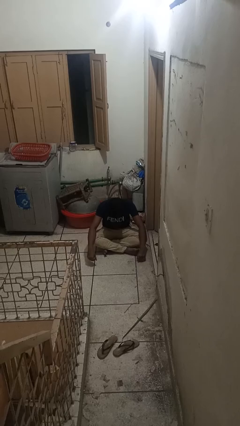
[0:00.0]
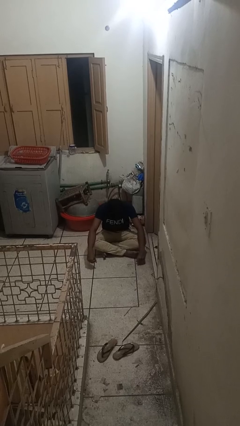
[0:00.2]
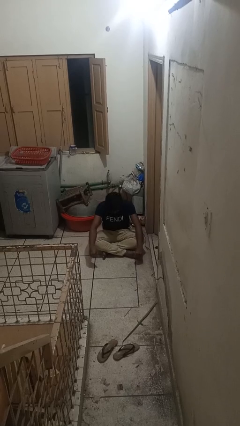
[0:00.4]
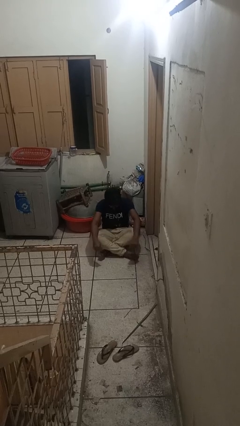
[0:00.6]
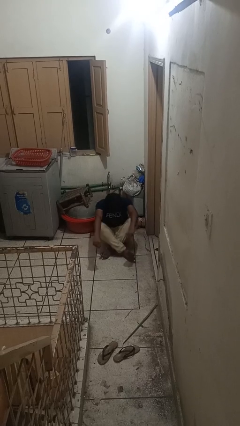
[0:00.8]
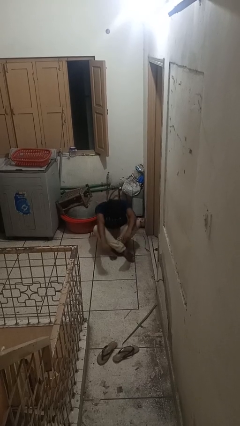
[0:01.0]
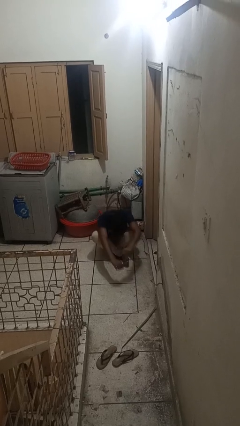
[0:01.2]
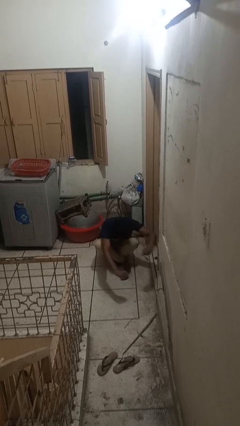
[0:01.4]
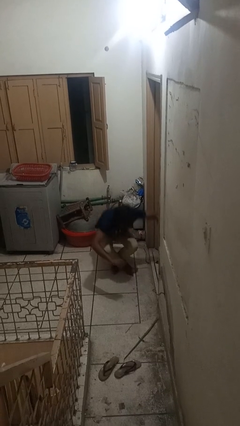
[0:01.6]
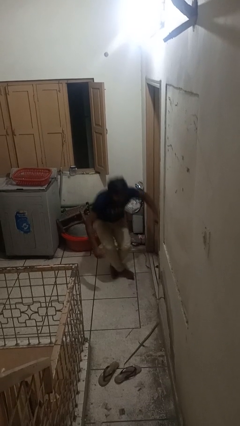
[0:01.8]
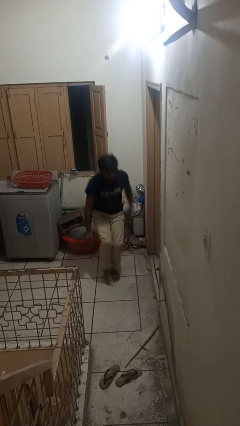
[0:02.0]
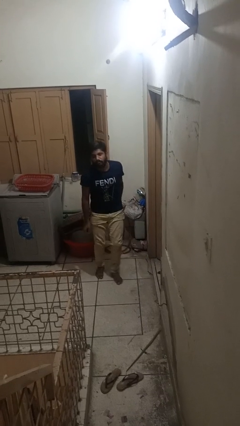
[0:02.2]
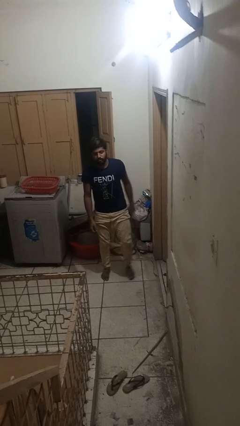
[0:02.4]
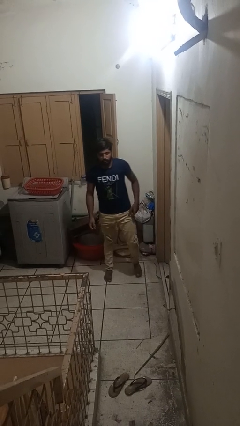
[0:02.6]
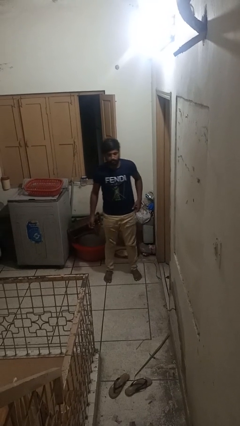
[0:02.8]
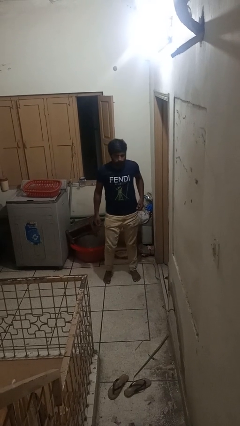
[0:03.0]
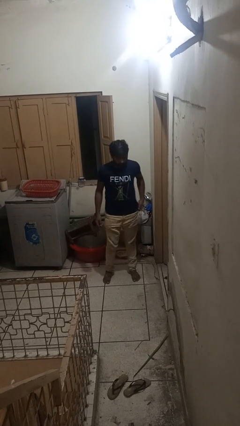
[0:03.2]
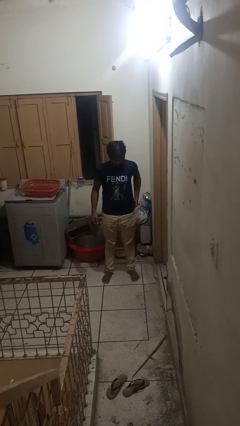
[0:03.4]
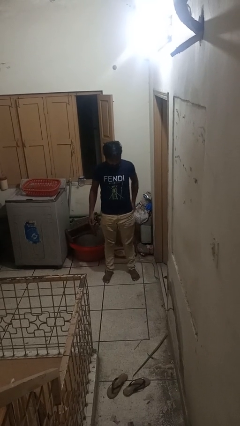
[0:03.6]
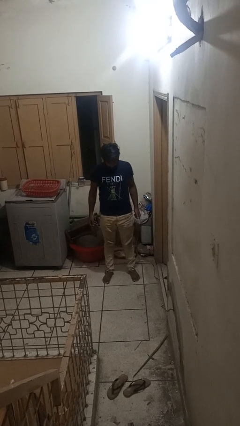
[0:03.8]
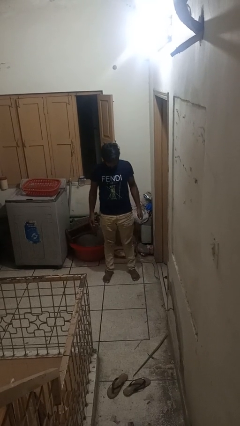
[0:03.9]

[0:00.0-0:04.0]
person stands up from floor

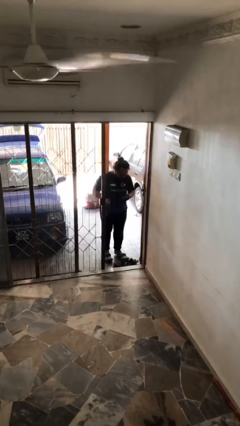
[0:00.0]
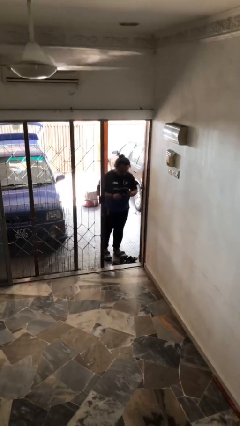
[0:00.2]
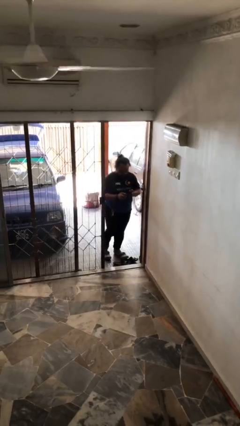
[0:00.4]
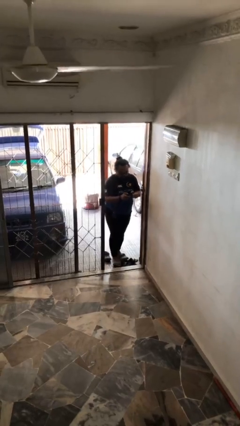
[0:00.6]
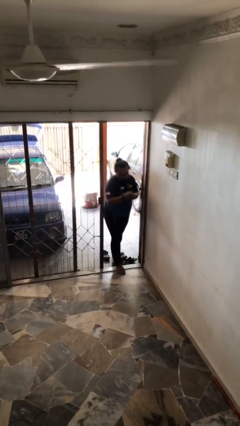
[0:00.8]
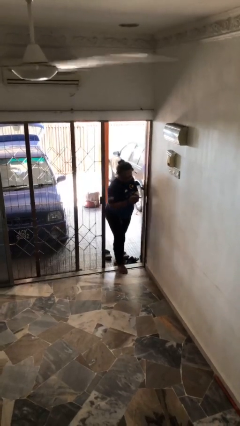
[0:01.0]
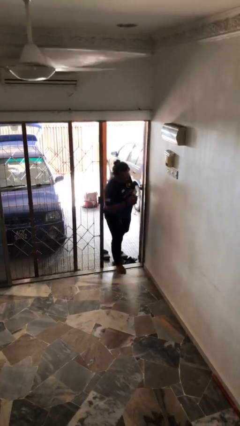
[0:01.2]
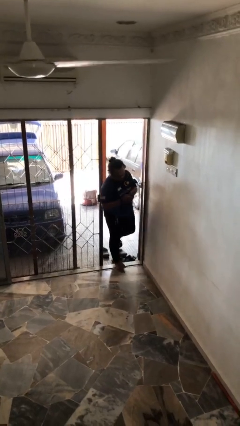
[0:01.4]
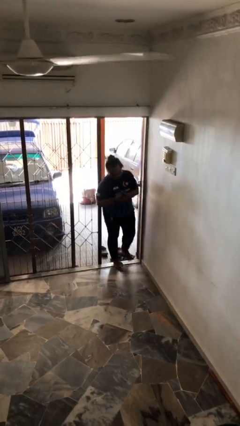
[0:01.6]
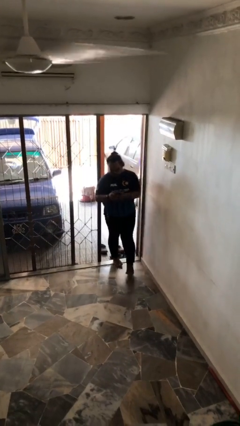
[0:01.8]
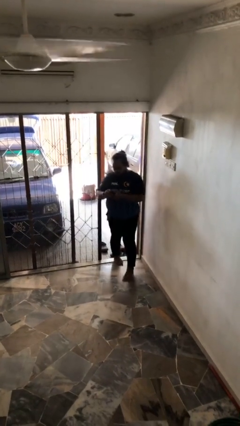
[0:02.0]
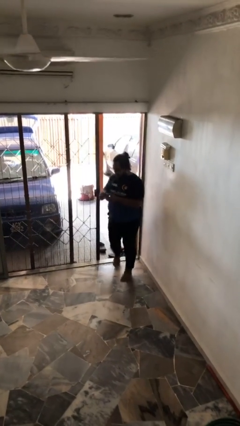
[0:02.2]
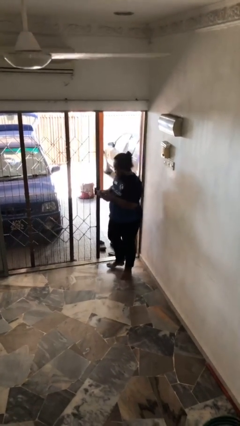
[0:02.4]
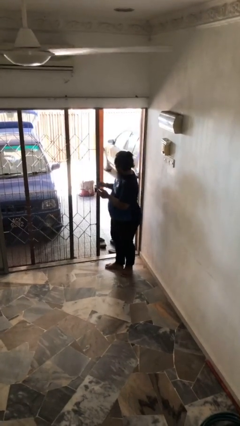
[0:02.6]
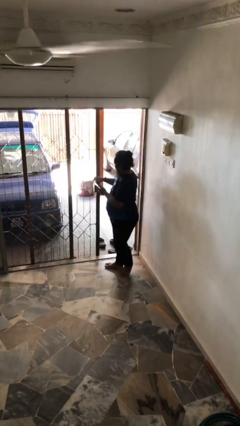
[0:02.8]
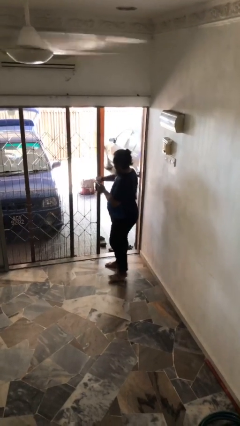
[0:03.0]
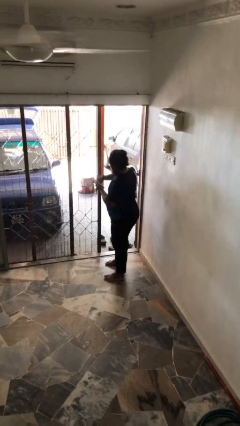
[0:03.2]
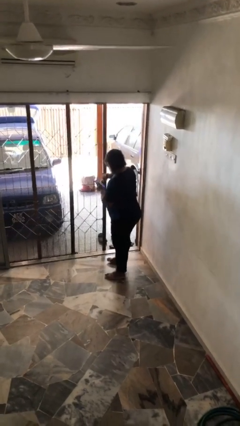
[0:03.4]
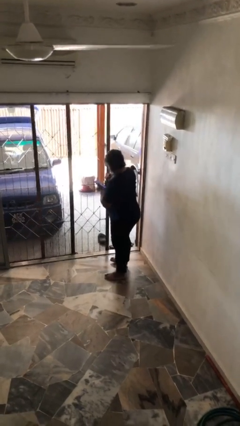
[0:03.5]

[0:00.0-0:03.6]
person enters scene through structure

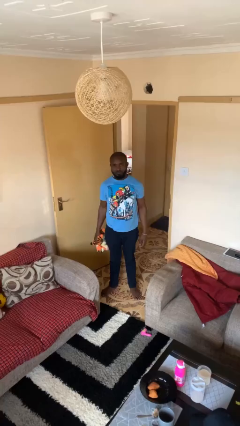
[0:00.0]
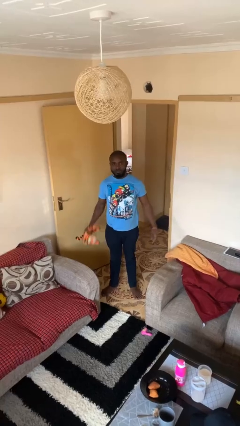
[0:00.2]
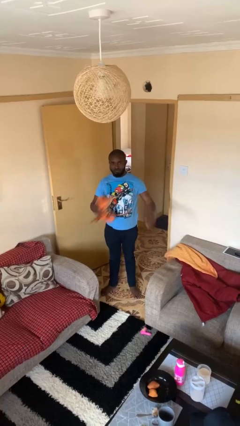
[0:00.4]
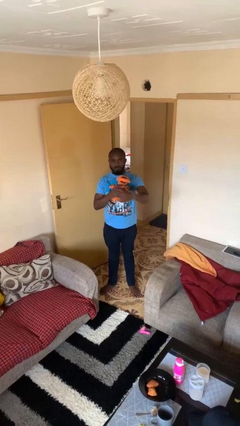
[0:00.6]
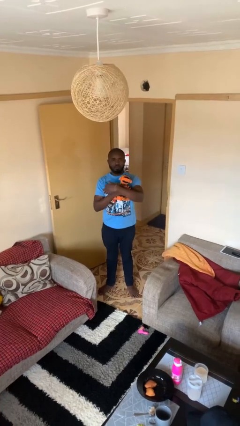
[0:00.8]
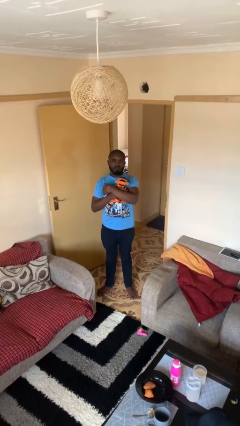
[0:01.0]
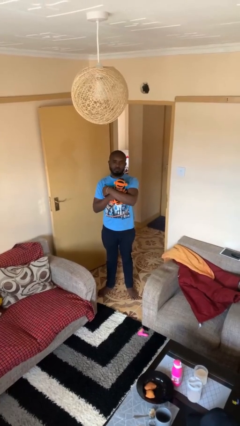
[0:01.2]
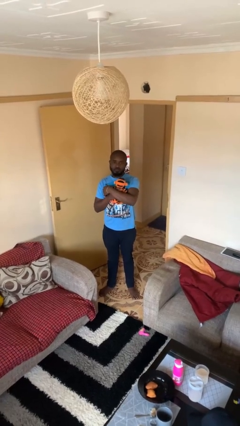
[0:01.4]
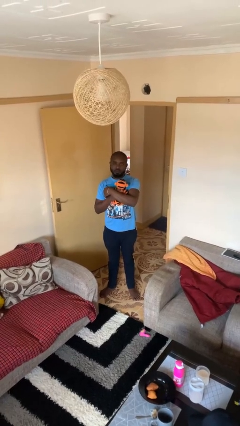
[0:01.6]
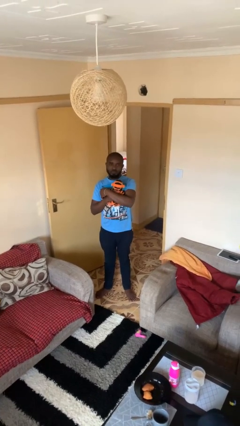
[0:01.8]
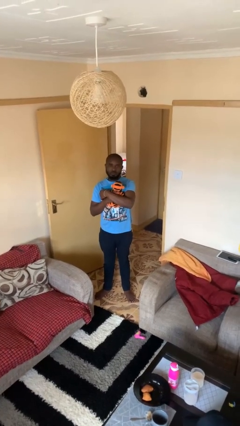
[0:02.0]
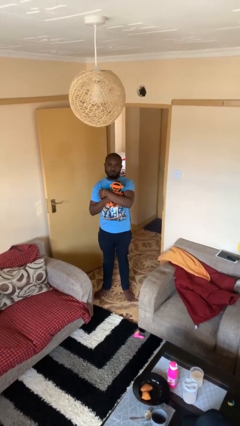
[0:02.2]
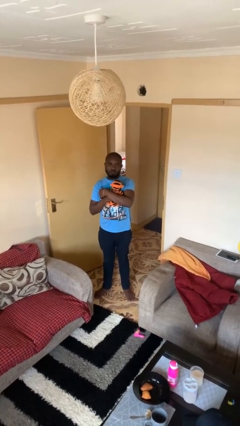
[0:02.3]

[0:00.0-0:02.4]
person hugs stuffed animal

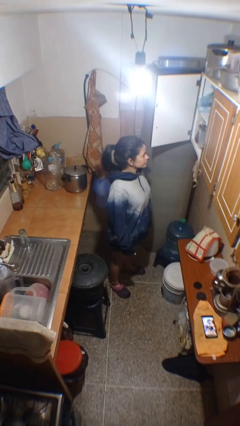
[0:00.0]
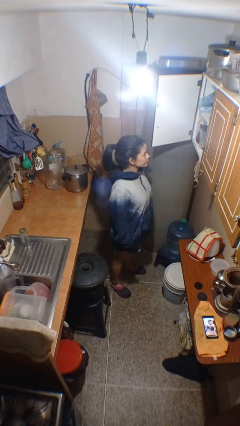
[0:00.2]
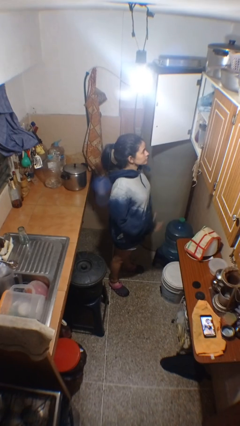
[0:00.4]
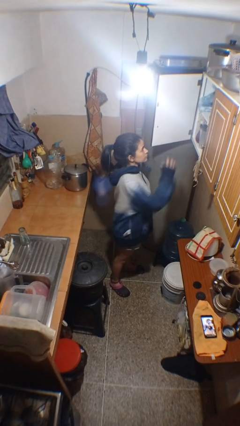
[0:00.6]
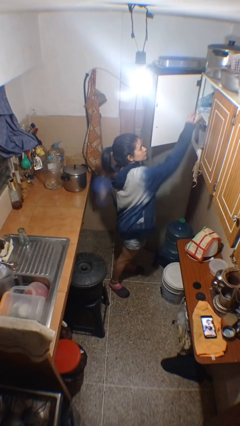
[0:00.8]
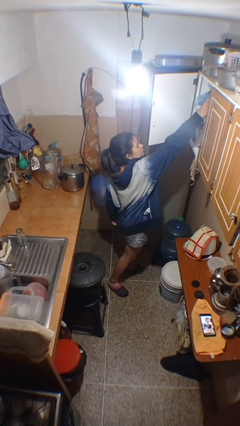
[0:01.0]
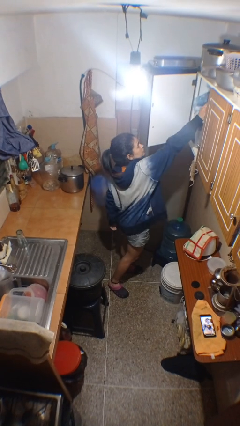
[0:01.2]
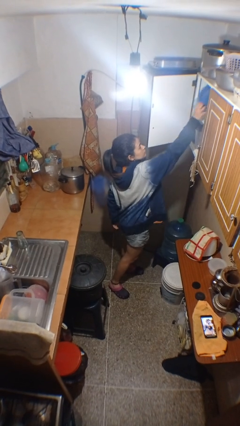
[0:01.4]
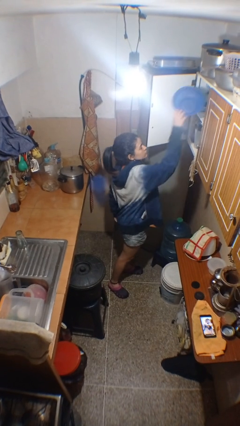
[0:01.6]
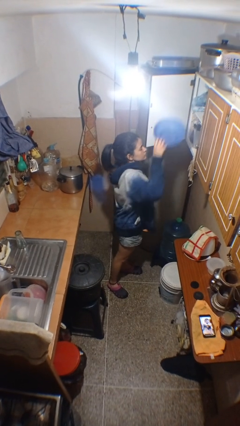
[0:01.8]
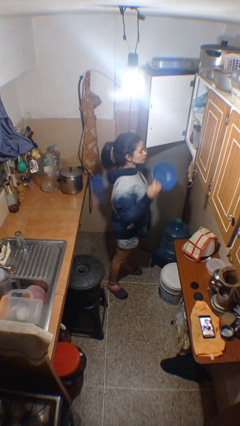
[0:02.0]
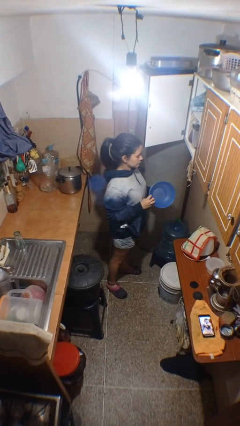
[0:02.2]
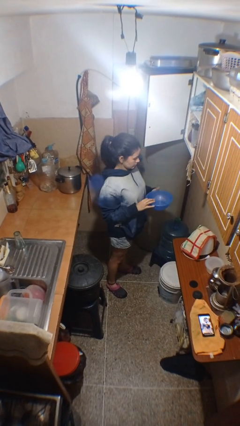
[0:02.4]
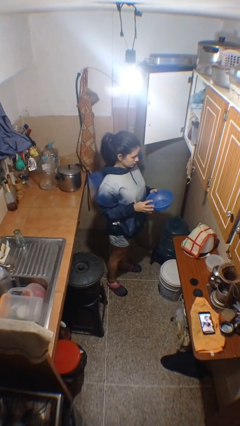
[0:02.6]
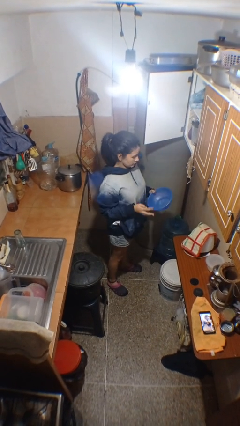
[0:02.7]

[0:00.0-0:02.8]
person picks up object from cabinet

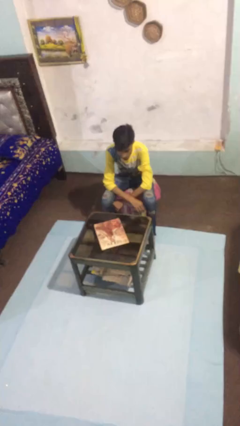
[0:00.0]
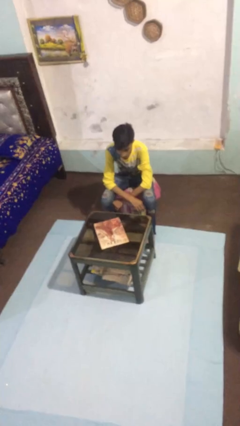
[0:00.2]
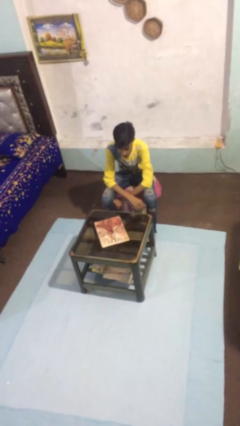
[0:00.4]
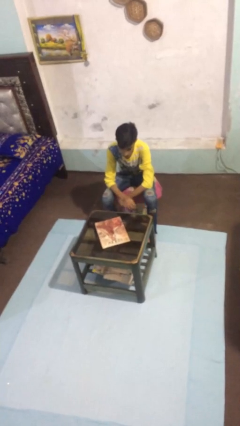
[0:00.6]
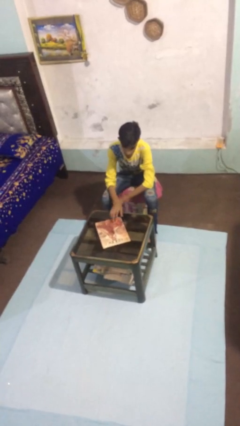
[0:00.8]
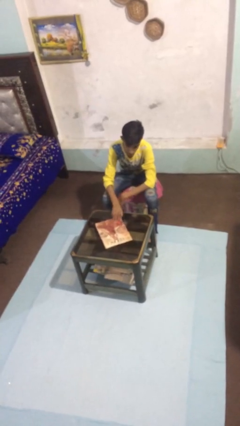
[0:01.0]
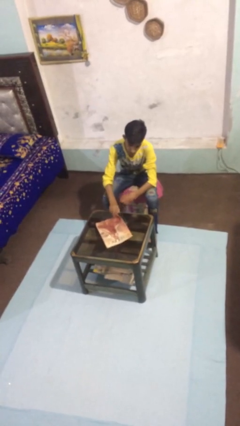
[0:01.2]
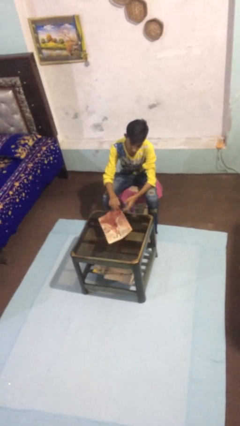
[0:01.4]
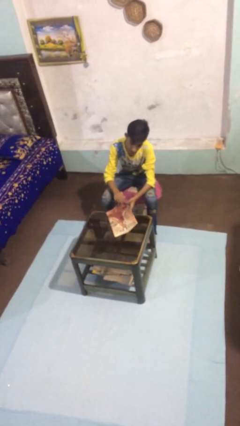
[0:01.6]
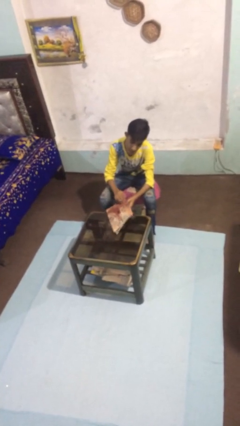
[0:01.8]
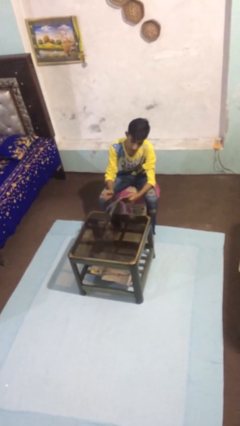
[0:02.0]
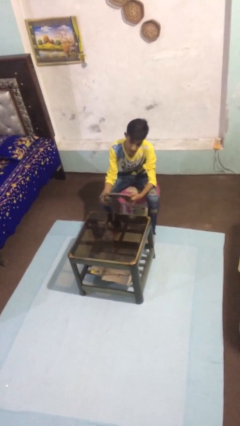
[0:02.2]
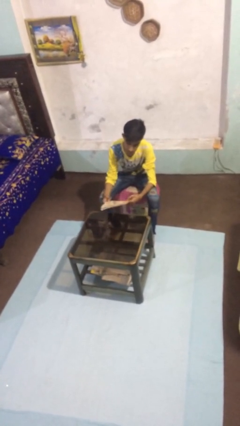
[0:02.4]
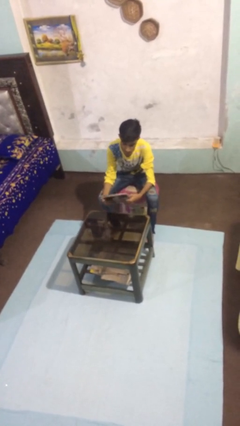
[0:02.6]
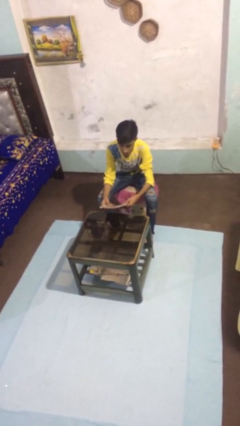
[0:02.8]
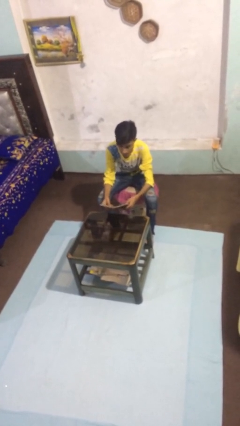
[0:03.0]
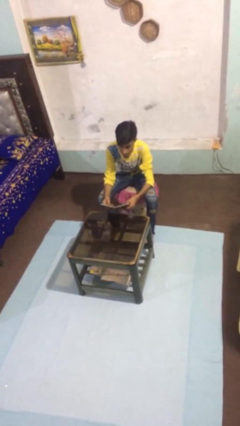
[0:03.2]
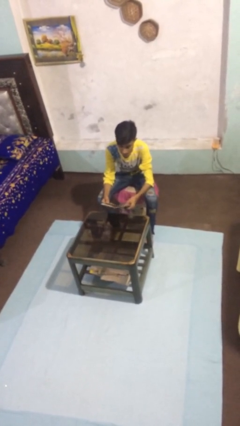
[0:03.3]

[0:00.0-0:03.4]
person picks up object from table

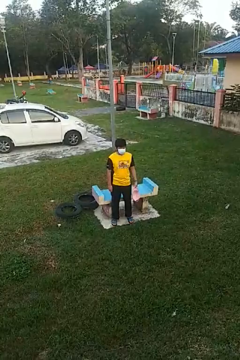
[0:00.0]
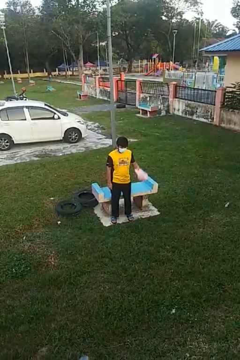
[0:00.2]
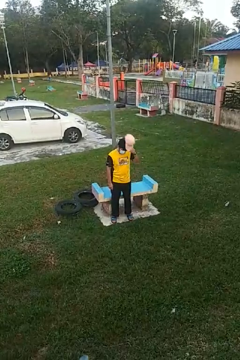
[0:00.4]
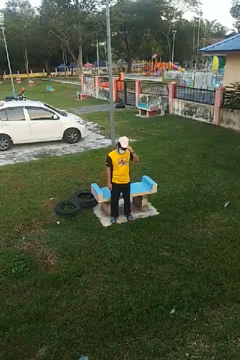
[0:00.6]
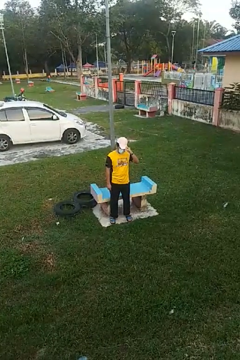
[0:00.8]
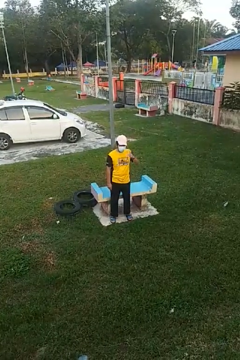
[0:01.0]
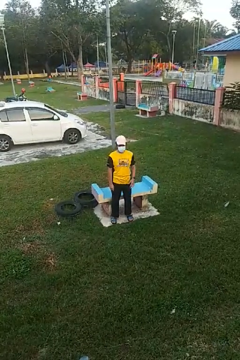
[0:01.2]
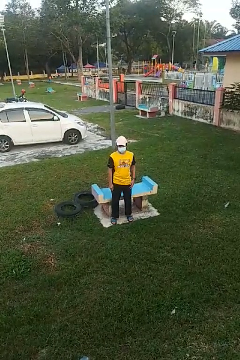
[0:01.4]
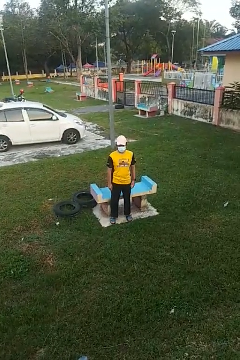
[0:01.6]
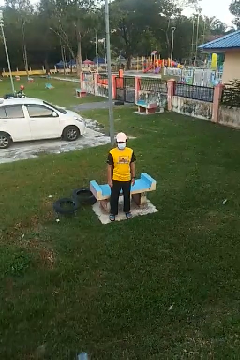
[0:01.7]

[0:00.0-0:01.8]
person puts on hat
